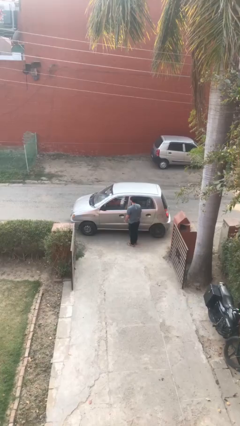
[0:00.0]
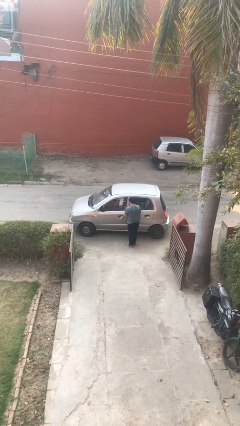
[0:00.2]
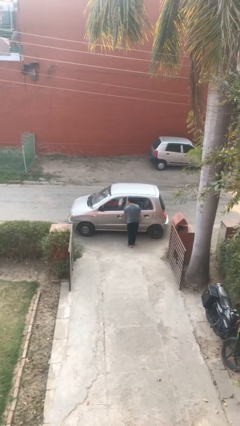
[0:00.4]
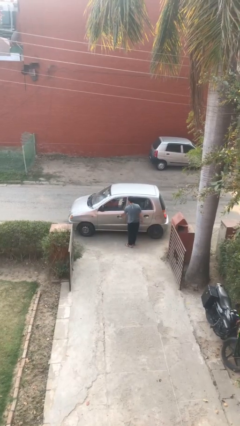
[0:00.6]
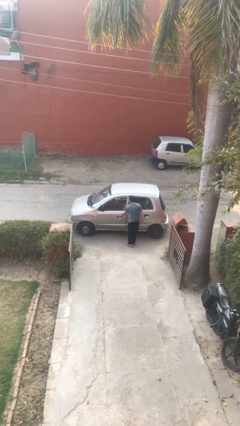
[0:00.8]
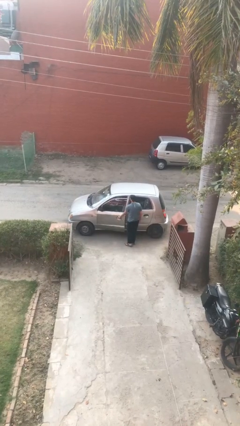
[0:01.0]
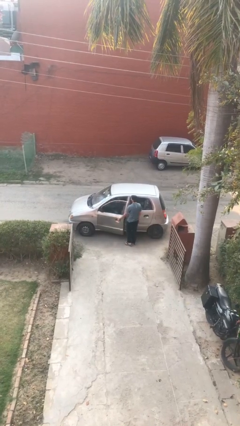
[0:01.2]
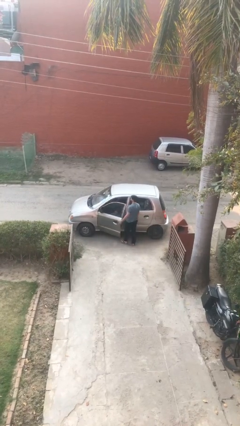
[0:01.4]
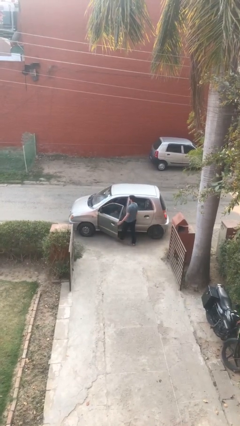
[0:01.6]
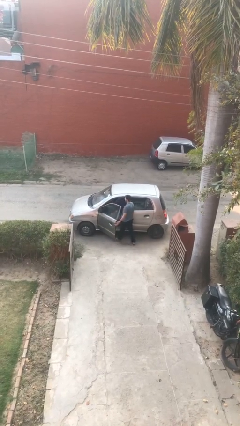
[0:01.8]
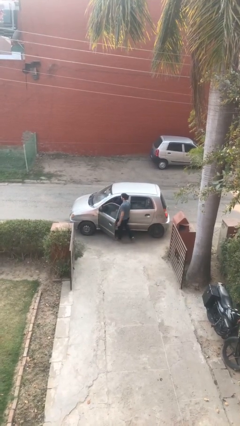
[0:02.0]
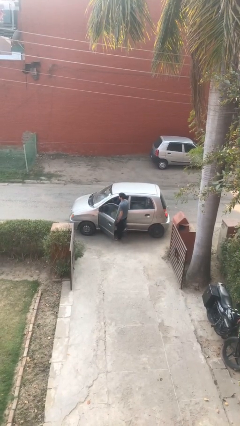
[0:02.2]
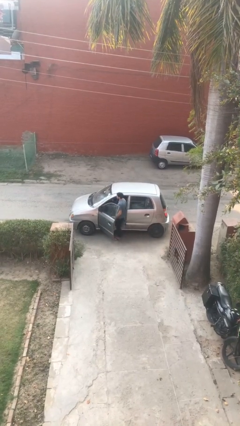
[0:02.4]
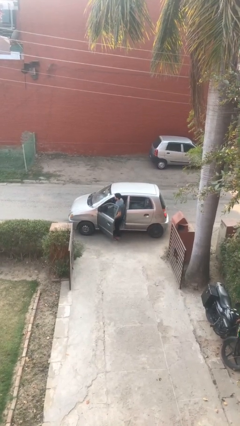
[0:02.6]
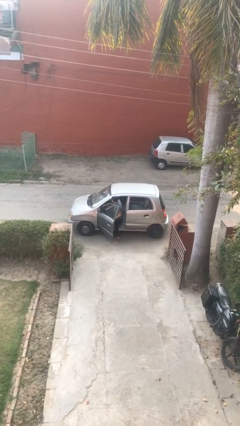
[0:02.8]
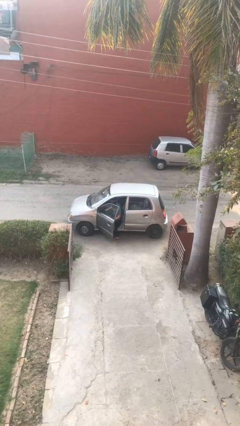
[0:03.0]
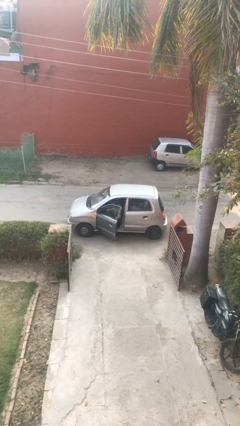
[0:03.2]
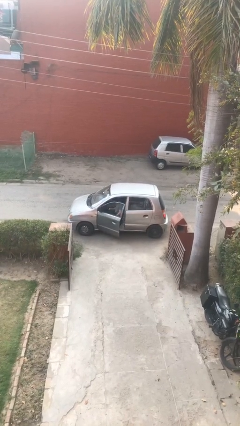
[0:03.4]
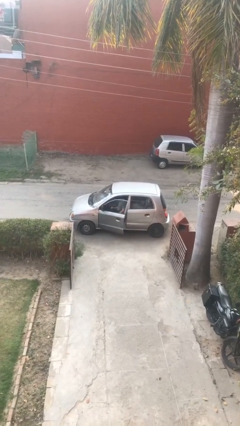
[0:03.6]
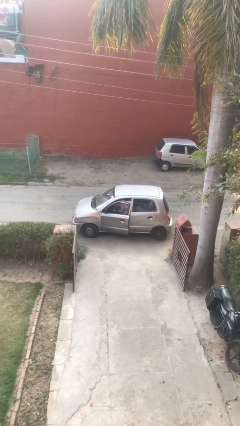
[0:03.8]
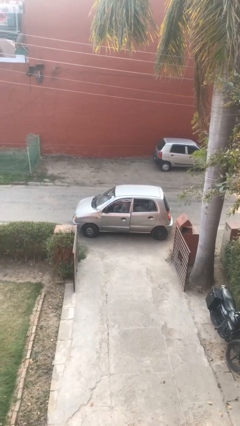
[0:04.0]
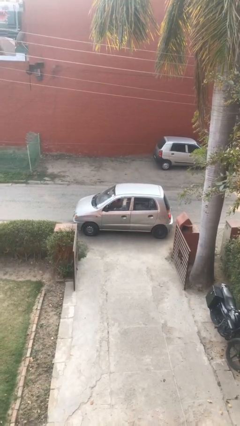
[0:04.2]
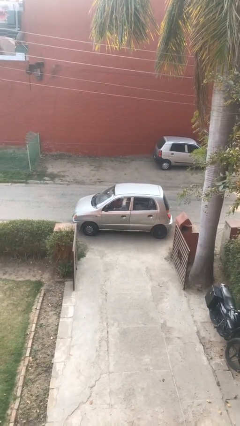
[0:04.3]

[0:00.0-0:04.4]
car picks up person

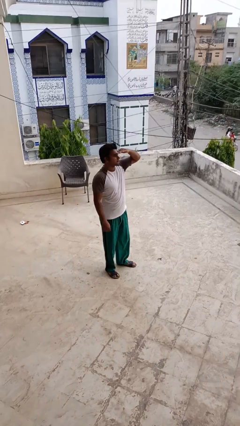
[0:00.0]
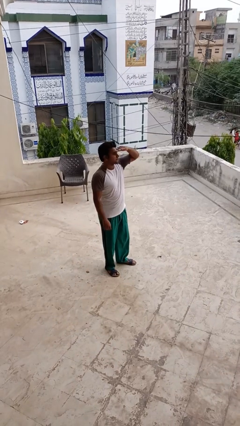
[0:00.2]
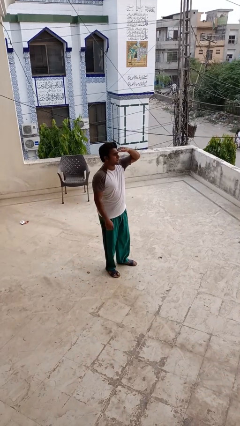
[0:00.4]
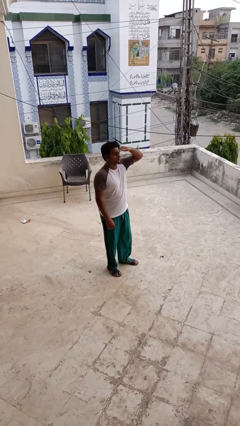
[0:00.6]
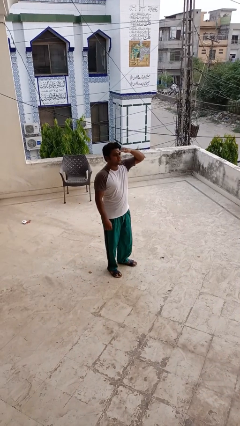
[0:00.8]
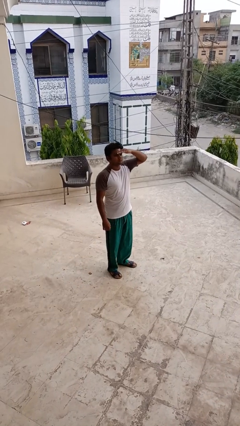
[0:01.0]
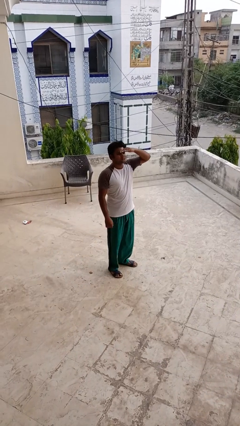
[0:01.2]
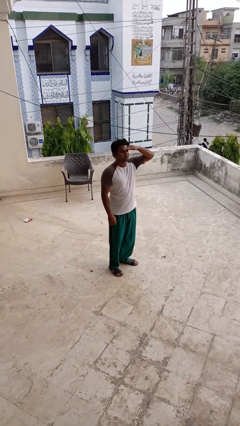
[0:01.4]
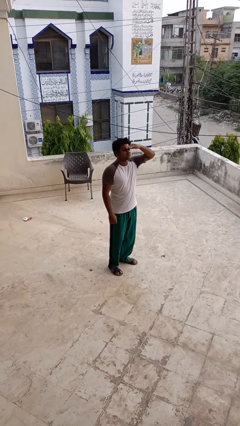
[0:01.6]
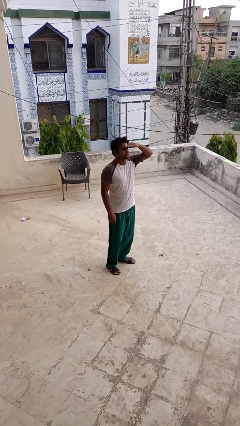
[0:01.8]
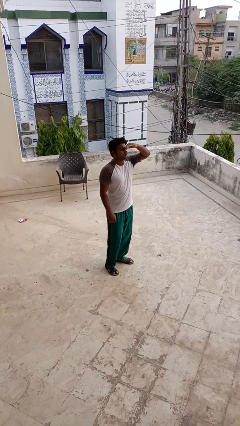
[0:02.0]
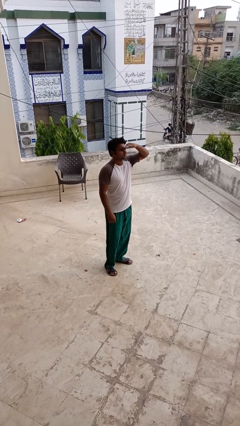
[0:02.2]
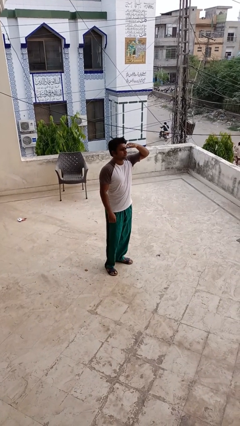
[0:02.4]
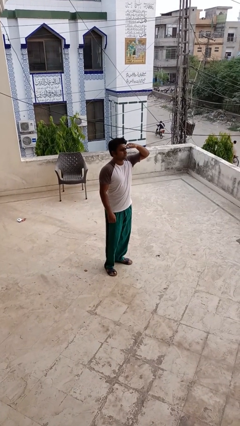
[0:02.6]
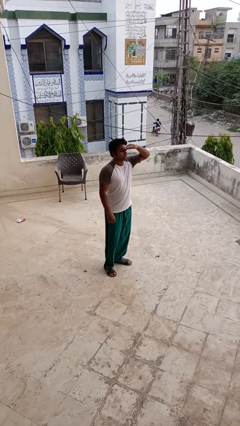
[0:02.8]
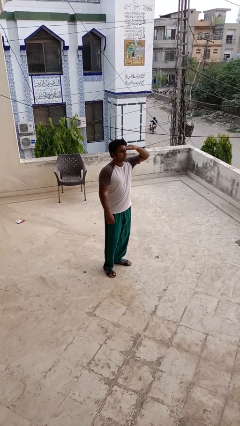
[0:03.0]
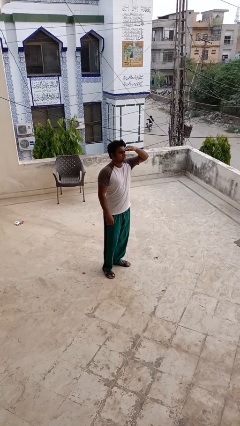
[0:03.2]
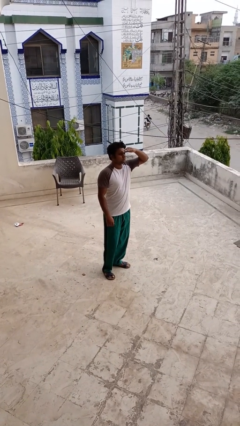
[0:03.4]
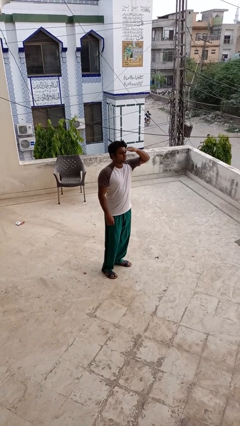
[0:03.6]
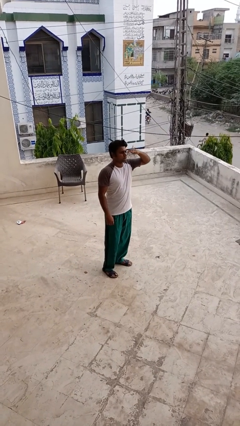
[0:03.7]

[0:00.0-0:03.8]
person shades eyes

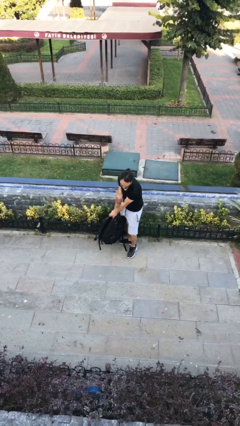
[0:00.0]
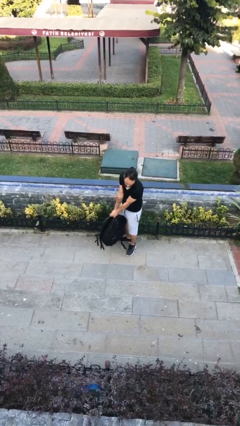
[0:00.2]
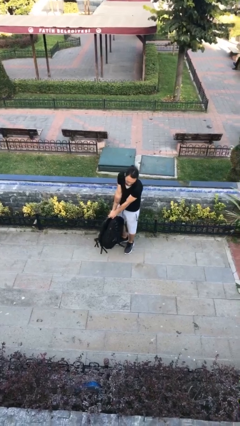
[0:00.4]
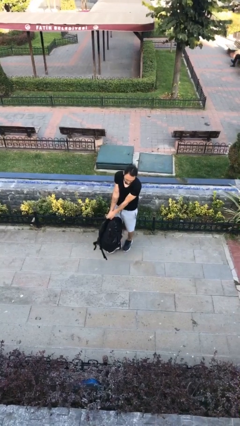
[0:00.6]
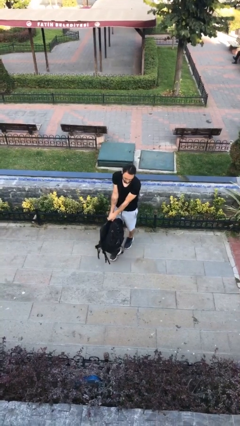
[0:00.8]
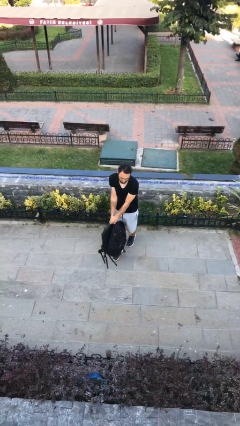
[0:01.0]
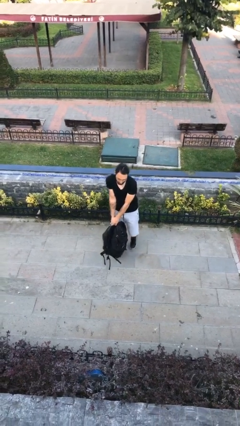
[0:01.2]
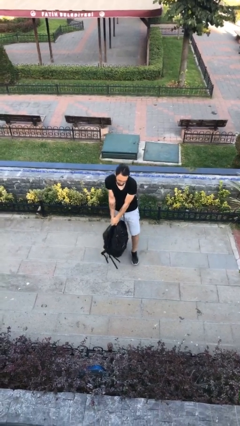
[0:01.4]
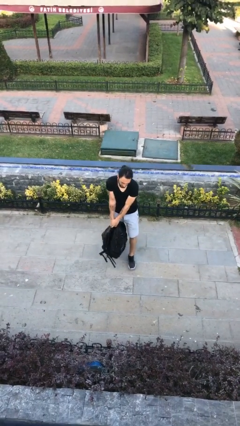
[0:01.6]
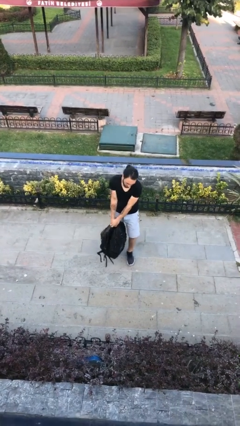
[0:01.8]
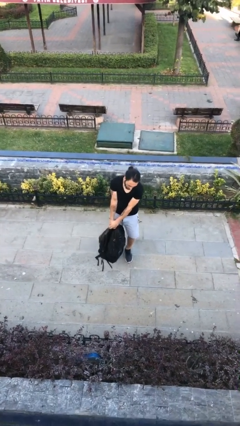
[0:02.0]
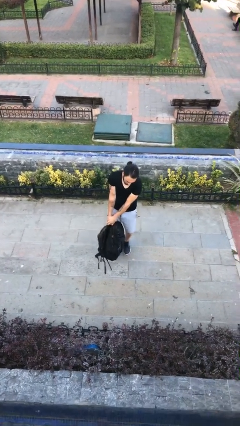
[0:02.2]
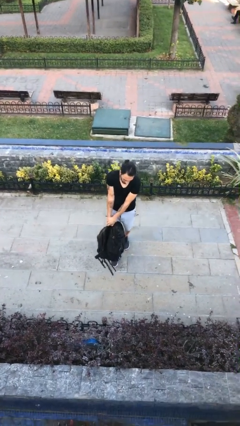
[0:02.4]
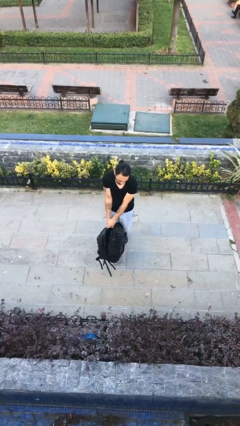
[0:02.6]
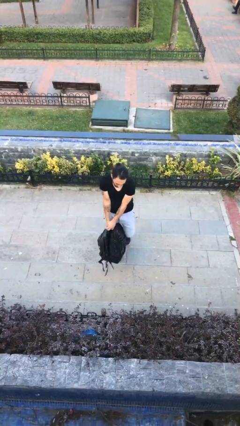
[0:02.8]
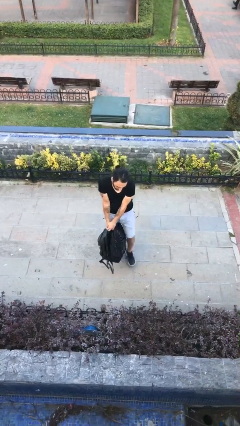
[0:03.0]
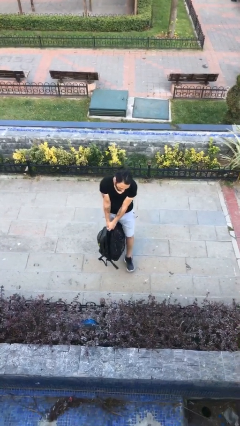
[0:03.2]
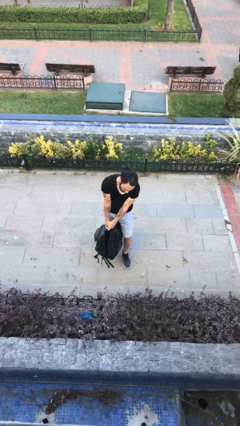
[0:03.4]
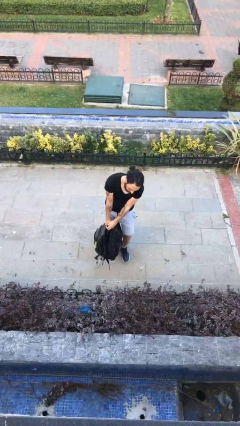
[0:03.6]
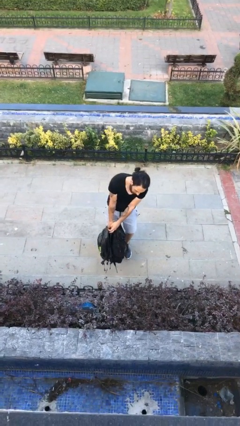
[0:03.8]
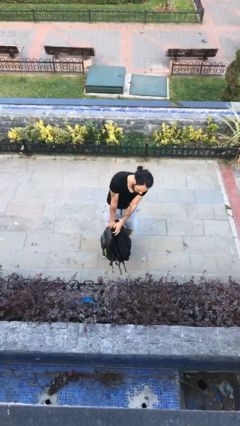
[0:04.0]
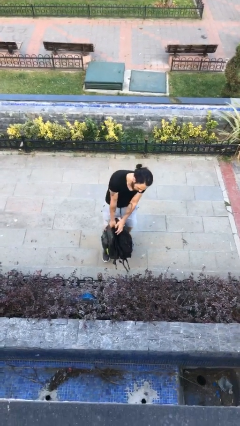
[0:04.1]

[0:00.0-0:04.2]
person carries heavy object

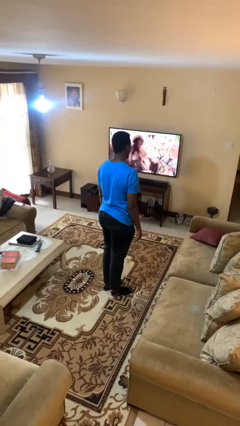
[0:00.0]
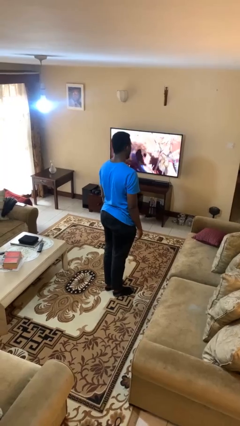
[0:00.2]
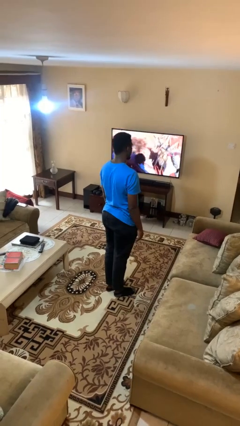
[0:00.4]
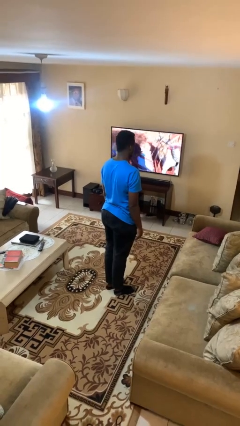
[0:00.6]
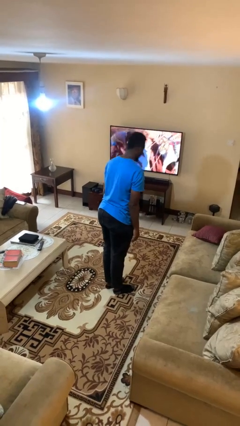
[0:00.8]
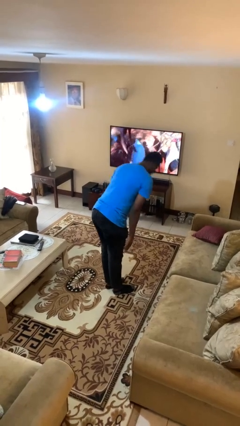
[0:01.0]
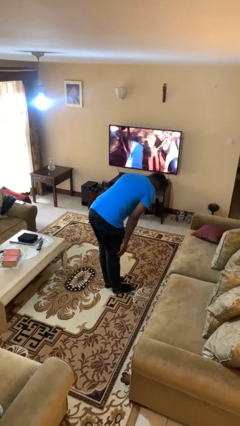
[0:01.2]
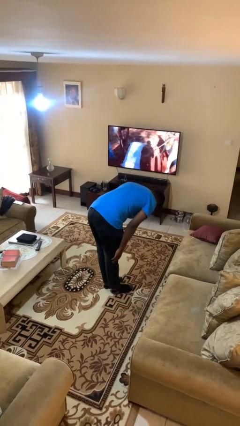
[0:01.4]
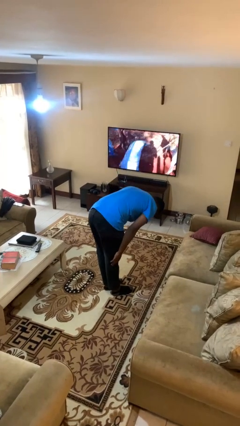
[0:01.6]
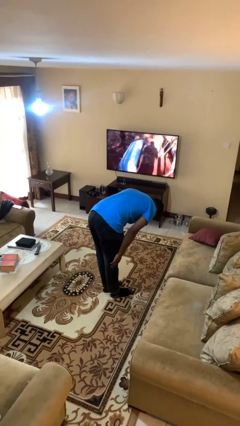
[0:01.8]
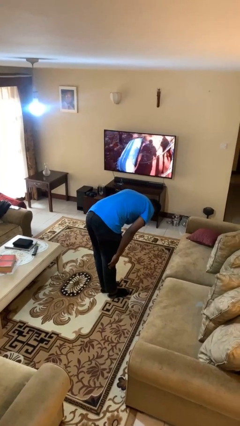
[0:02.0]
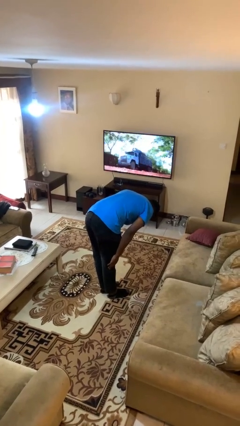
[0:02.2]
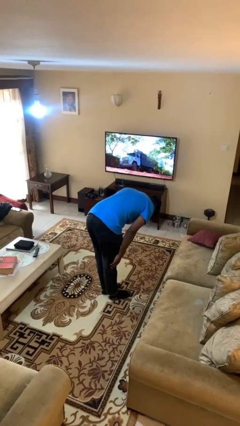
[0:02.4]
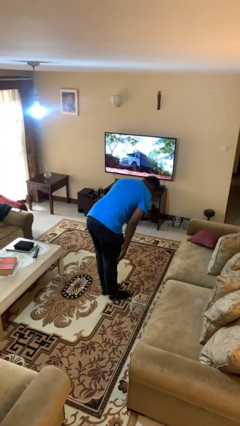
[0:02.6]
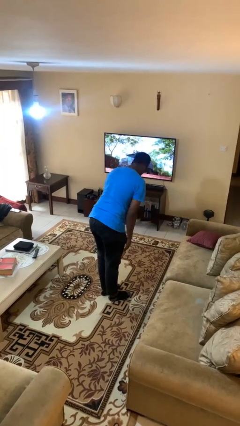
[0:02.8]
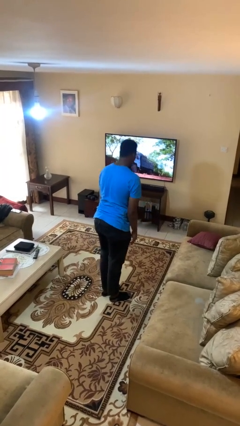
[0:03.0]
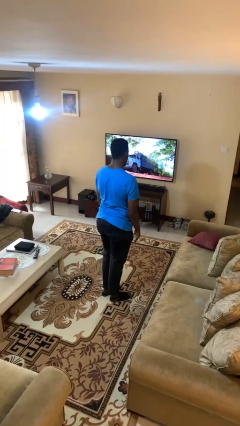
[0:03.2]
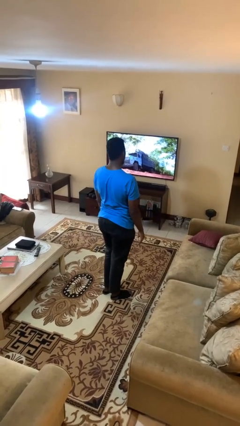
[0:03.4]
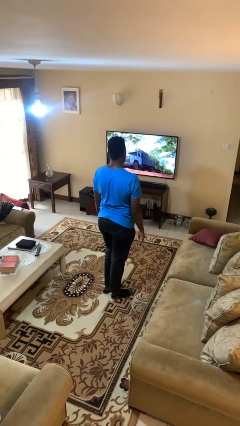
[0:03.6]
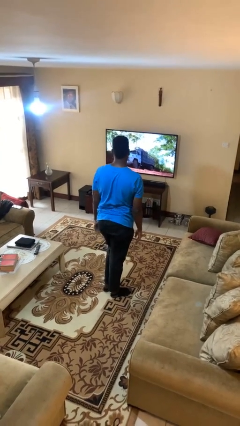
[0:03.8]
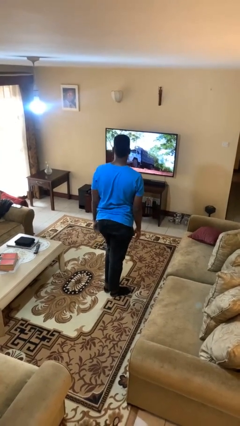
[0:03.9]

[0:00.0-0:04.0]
person bows

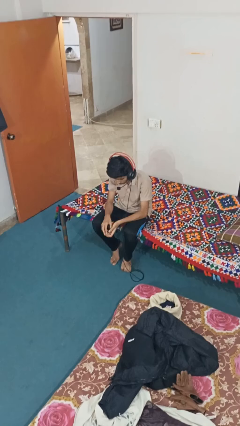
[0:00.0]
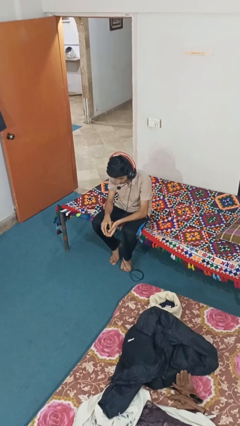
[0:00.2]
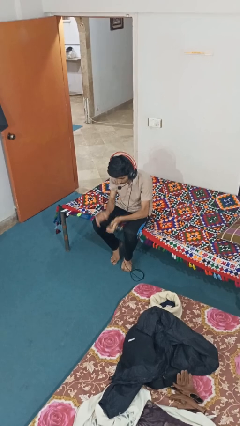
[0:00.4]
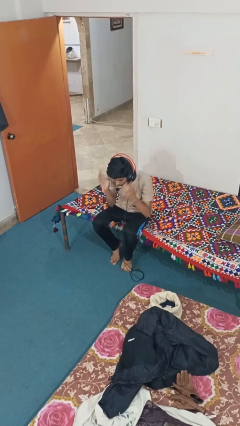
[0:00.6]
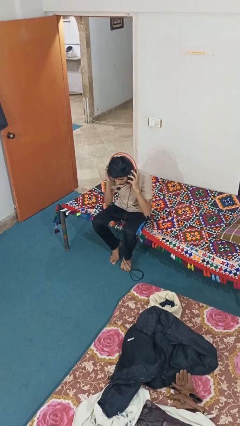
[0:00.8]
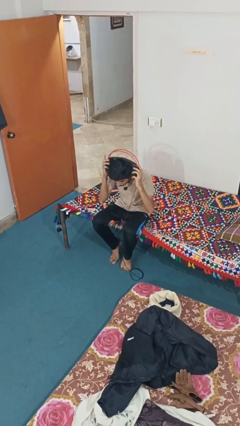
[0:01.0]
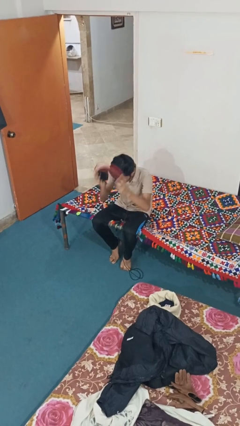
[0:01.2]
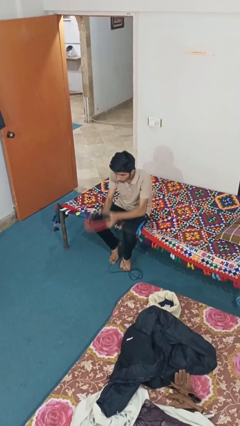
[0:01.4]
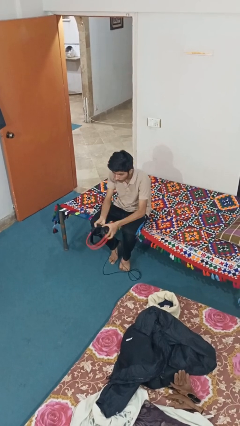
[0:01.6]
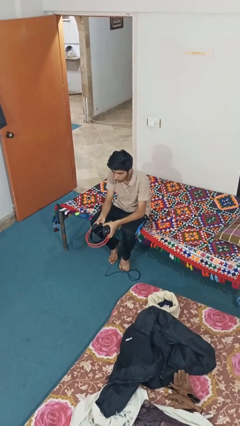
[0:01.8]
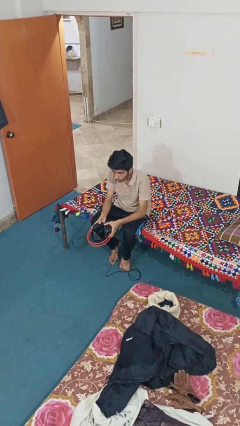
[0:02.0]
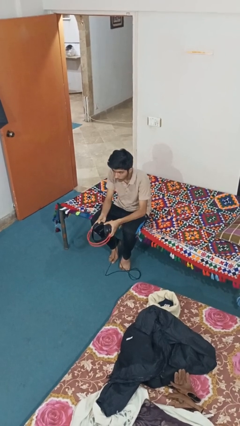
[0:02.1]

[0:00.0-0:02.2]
person takes off headphones
